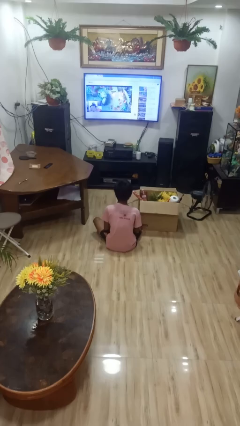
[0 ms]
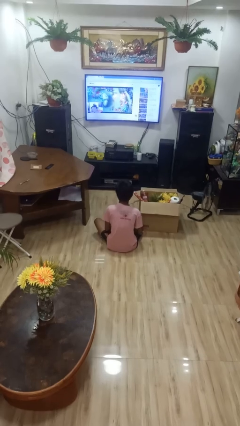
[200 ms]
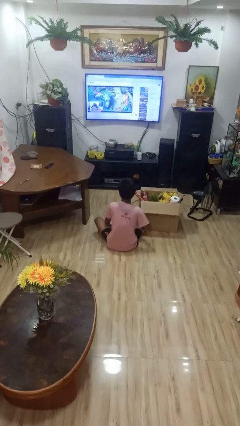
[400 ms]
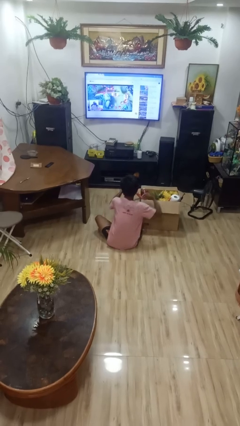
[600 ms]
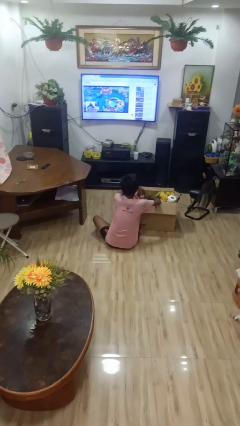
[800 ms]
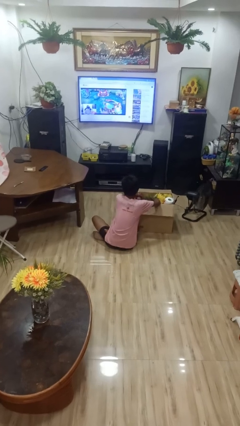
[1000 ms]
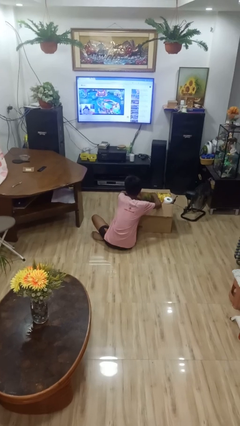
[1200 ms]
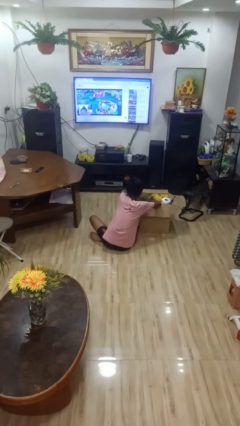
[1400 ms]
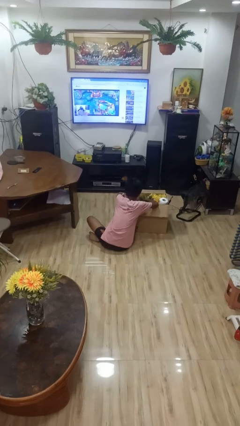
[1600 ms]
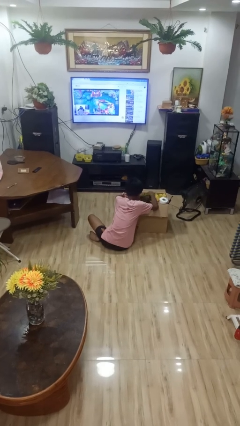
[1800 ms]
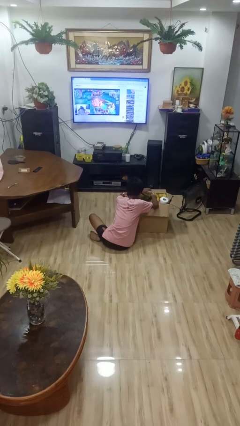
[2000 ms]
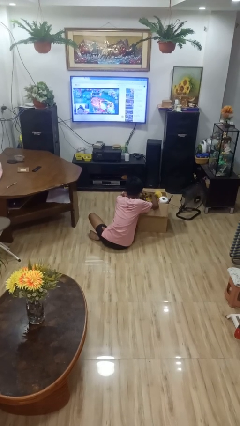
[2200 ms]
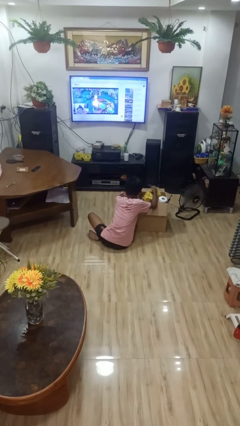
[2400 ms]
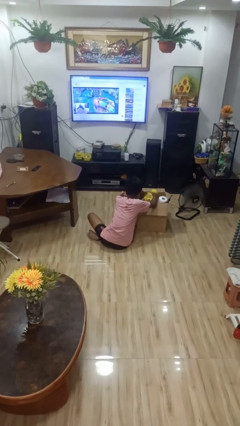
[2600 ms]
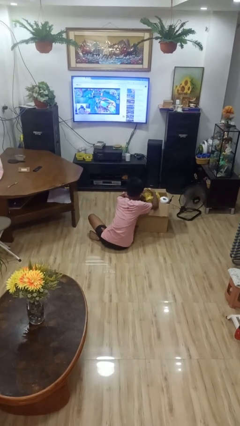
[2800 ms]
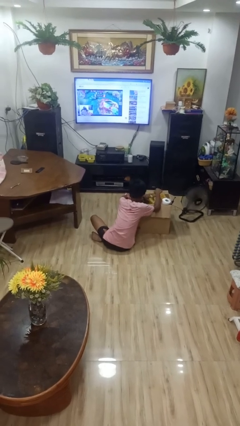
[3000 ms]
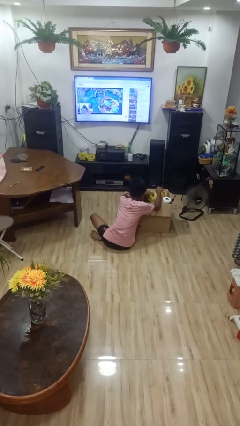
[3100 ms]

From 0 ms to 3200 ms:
person searches in box

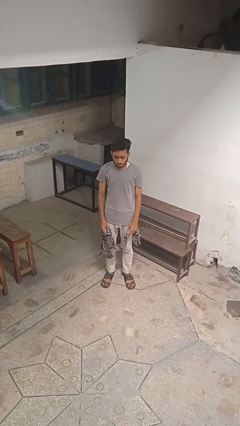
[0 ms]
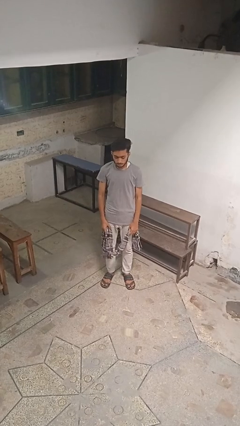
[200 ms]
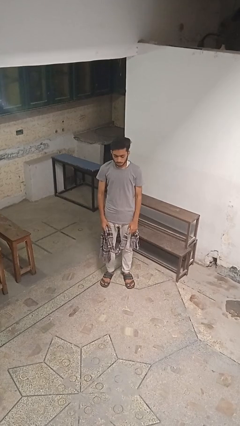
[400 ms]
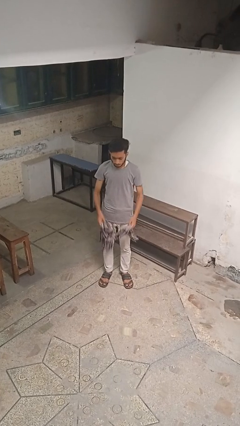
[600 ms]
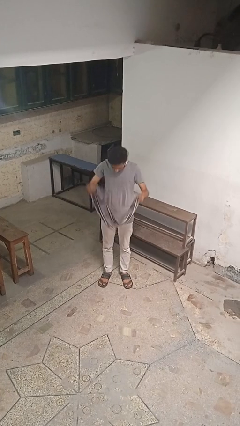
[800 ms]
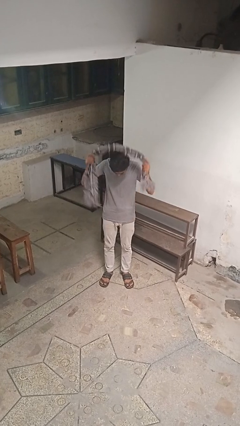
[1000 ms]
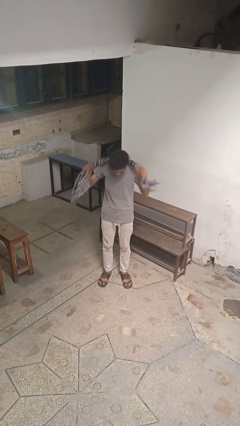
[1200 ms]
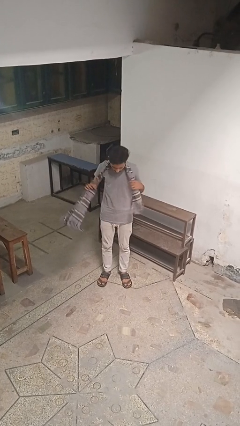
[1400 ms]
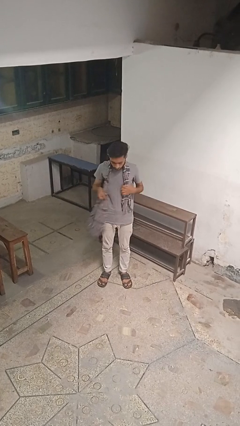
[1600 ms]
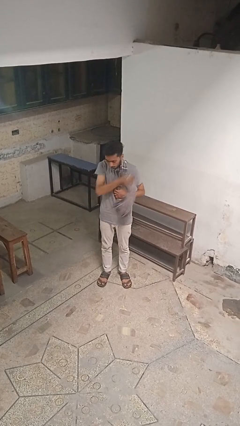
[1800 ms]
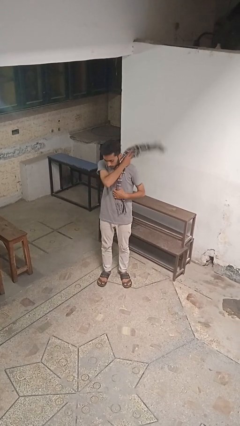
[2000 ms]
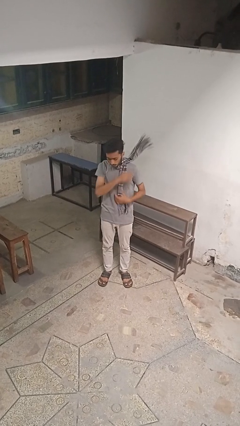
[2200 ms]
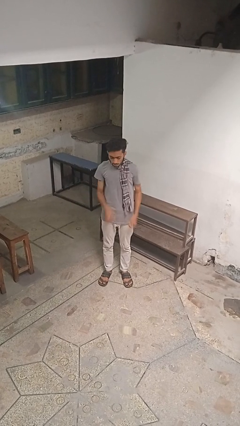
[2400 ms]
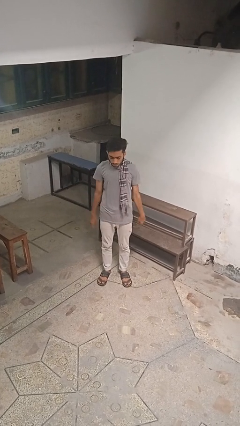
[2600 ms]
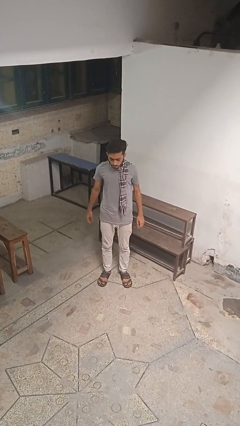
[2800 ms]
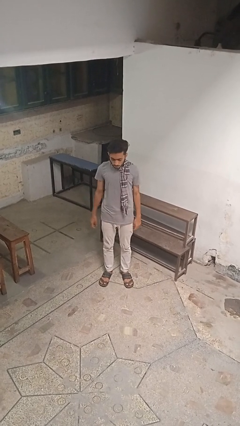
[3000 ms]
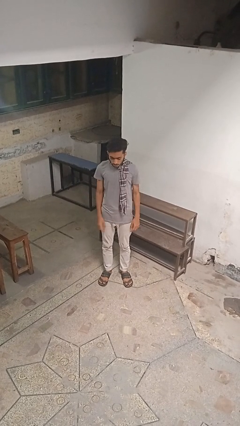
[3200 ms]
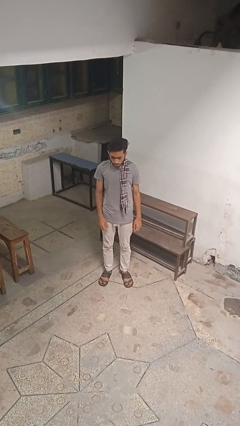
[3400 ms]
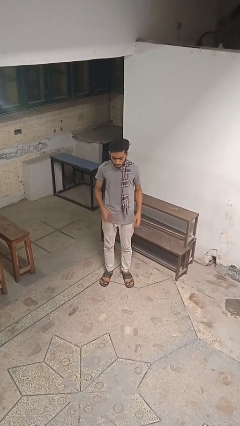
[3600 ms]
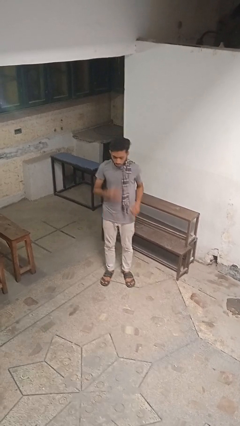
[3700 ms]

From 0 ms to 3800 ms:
person puts on scarf

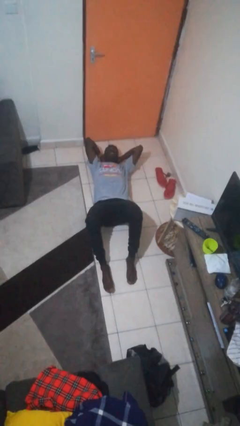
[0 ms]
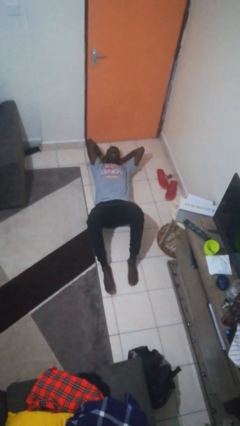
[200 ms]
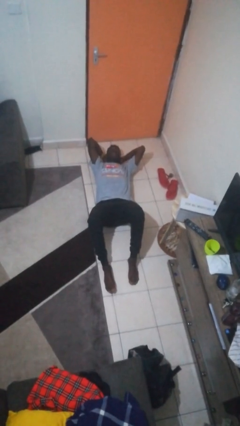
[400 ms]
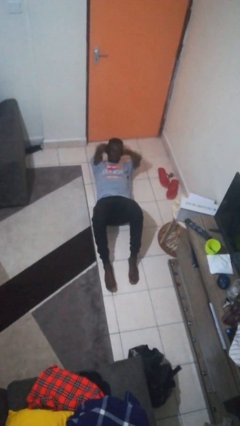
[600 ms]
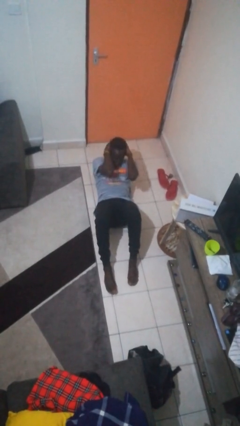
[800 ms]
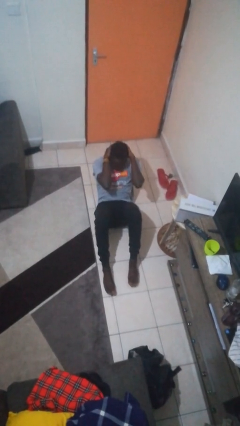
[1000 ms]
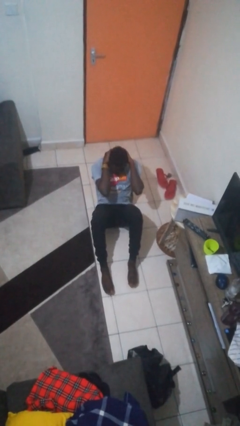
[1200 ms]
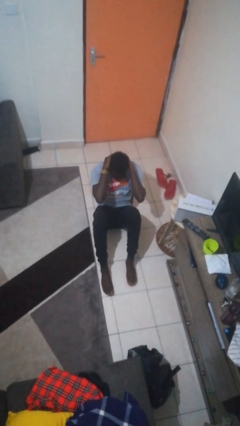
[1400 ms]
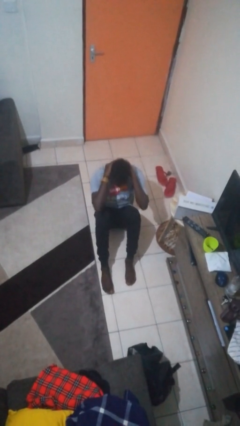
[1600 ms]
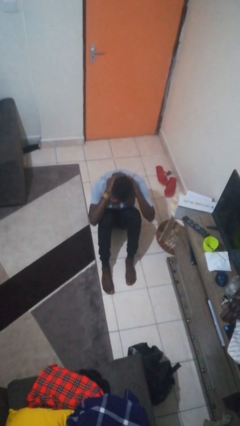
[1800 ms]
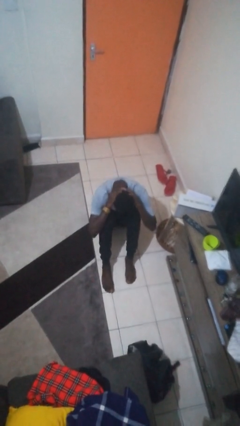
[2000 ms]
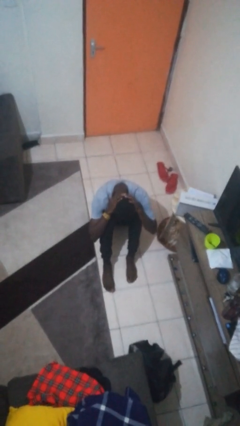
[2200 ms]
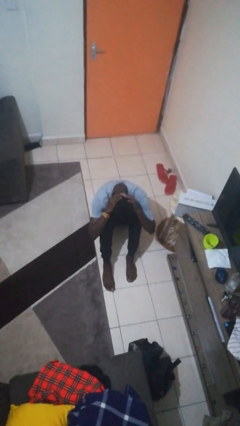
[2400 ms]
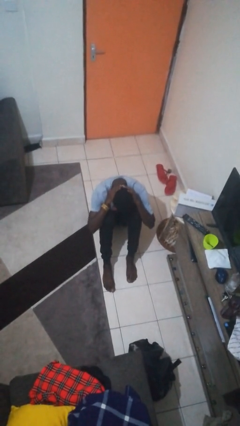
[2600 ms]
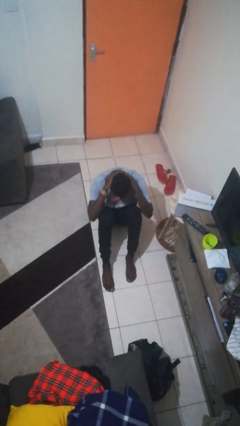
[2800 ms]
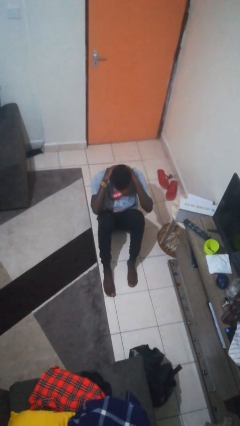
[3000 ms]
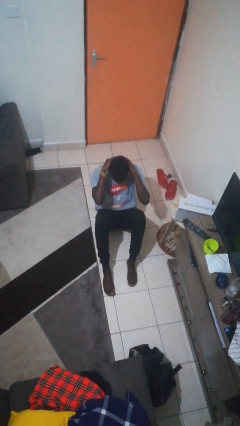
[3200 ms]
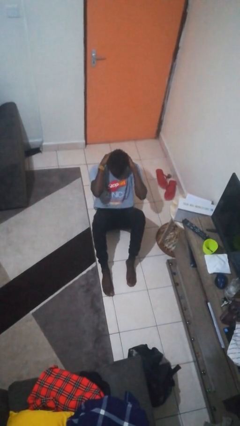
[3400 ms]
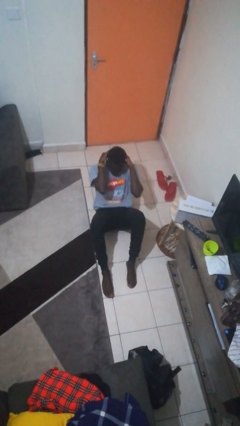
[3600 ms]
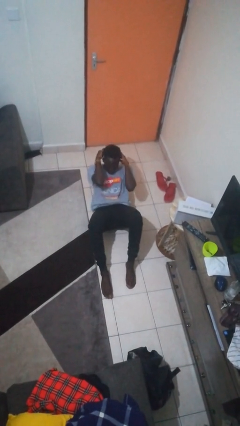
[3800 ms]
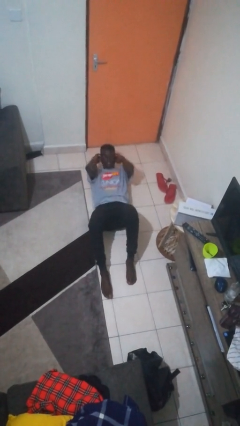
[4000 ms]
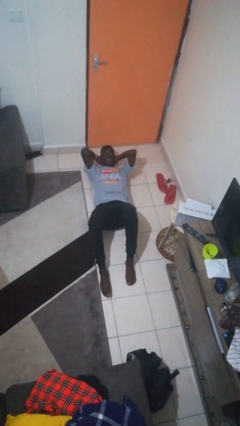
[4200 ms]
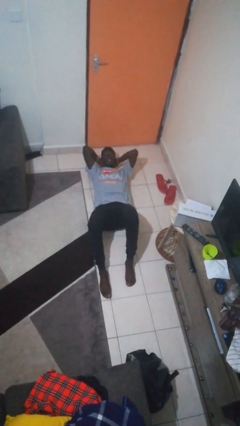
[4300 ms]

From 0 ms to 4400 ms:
person exercises with situp

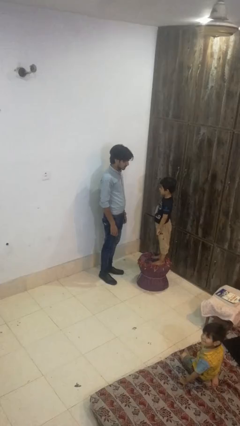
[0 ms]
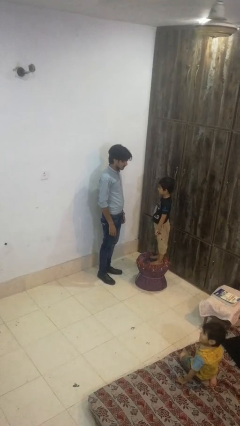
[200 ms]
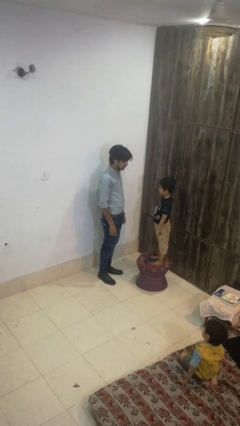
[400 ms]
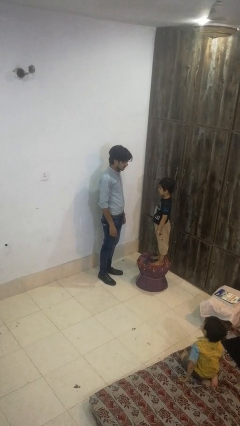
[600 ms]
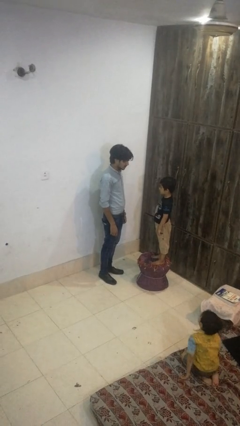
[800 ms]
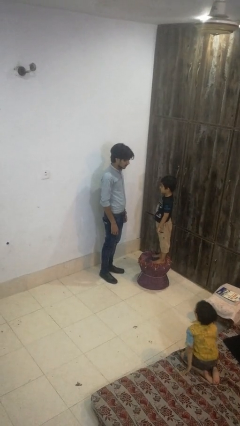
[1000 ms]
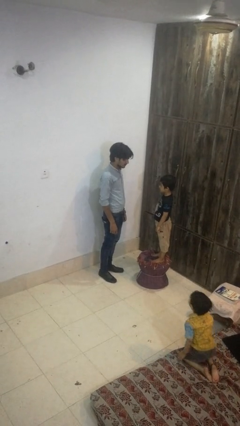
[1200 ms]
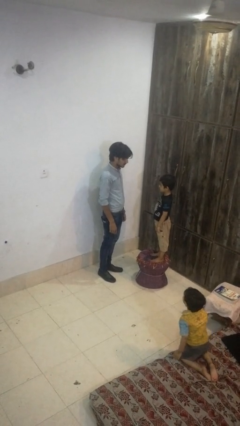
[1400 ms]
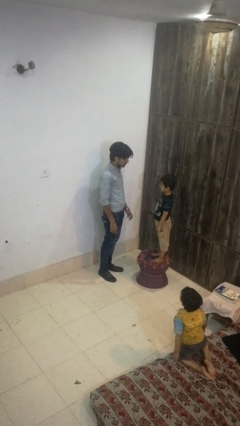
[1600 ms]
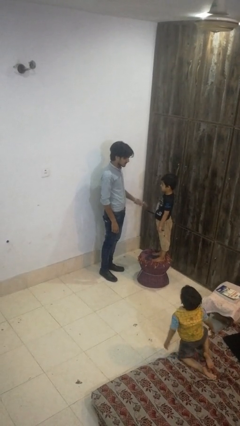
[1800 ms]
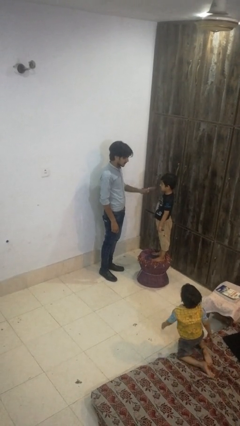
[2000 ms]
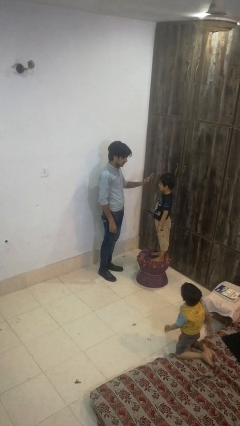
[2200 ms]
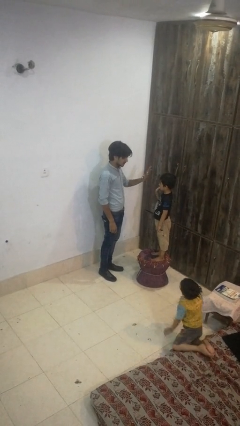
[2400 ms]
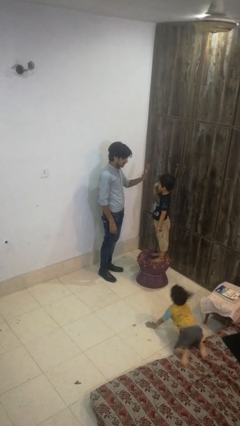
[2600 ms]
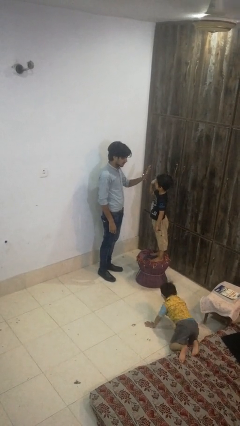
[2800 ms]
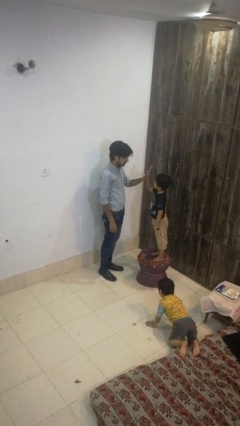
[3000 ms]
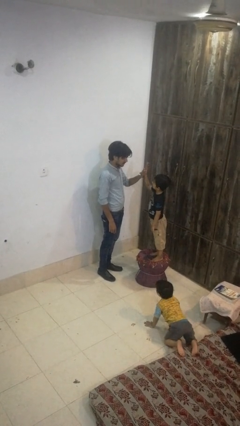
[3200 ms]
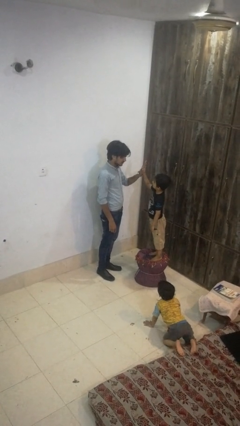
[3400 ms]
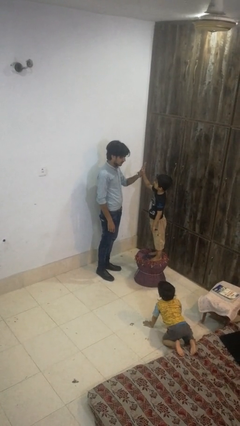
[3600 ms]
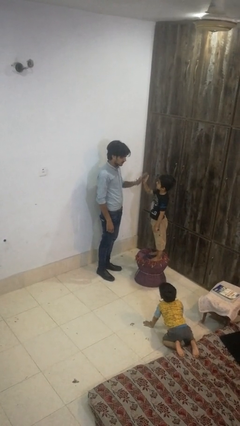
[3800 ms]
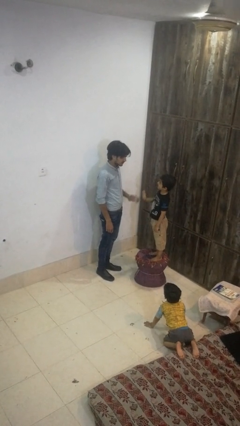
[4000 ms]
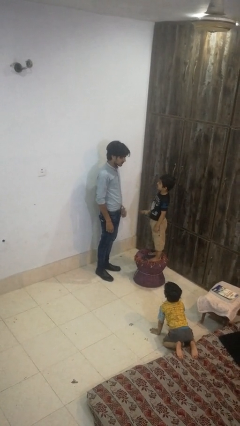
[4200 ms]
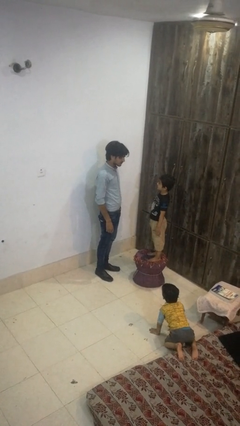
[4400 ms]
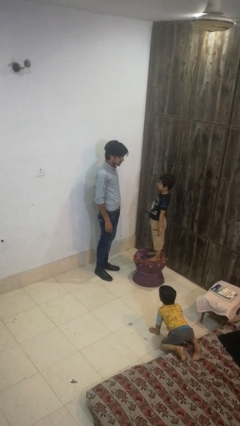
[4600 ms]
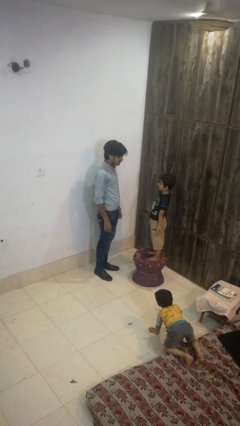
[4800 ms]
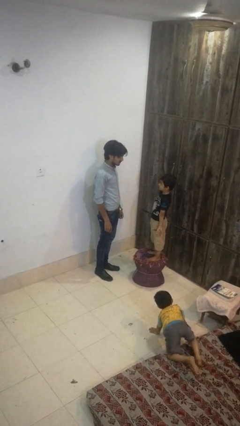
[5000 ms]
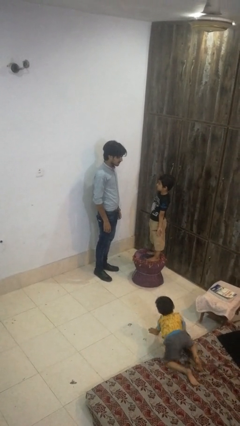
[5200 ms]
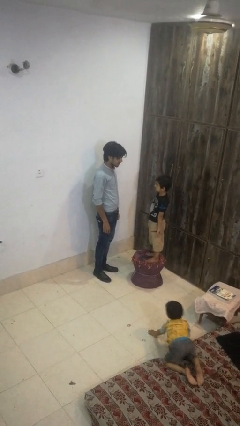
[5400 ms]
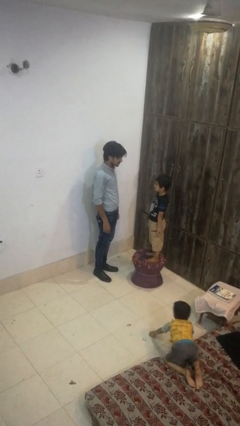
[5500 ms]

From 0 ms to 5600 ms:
person highfives hand

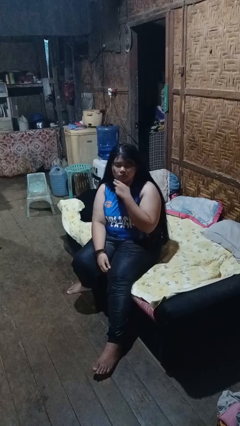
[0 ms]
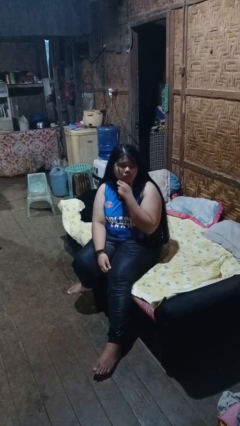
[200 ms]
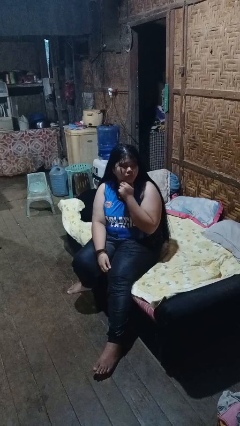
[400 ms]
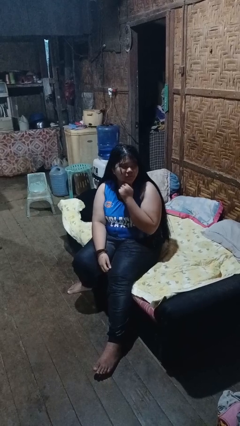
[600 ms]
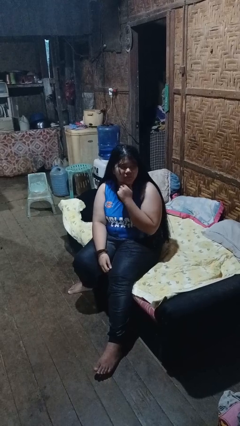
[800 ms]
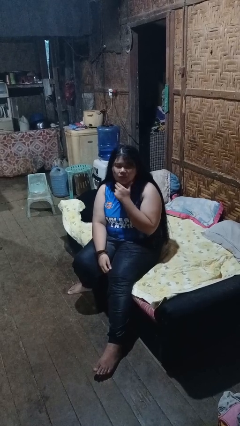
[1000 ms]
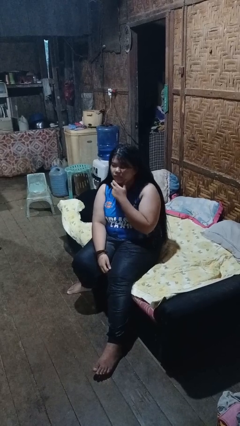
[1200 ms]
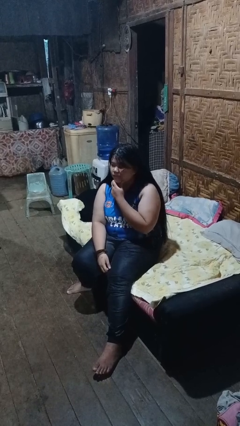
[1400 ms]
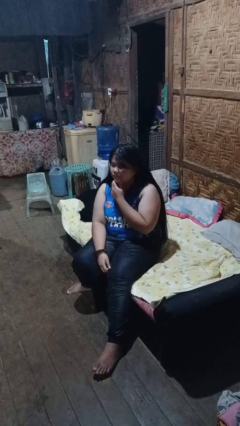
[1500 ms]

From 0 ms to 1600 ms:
person strokes chin
